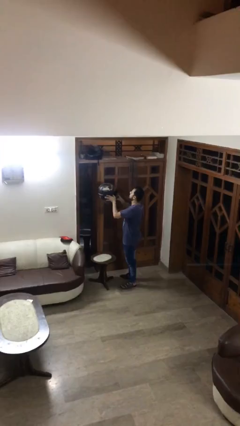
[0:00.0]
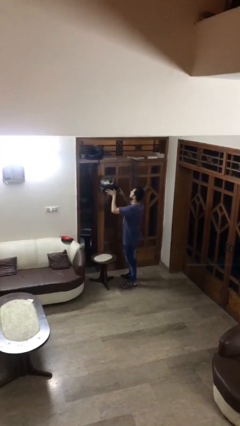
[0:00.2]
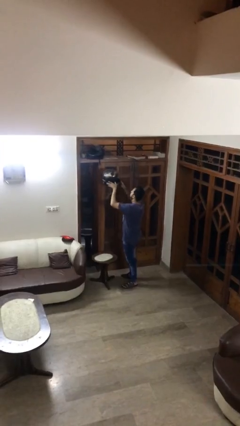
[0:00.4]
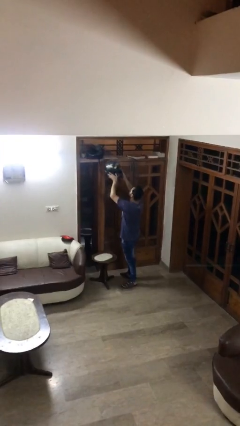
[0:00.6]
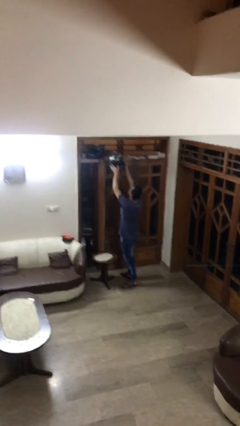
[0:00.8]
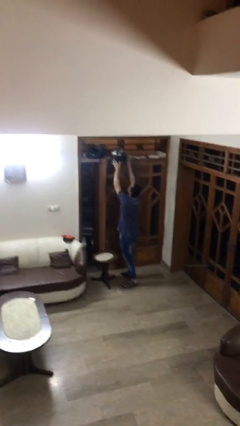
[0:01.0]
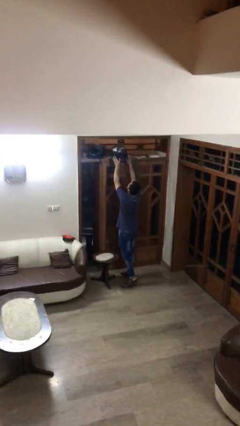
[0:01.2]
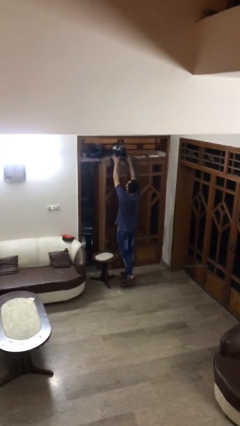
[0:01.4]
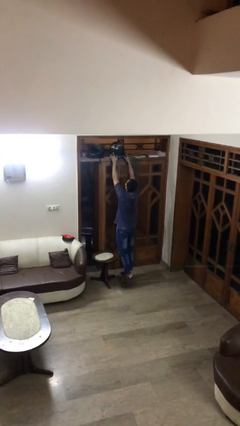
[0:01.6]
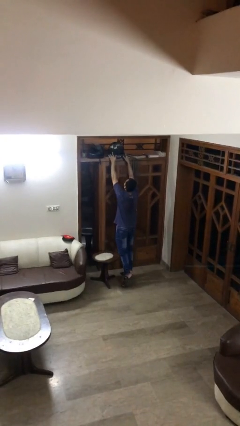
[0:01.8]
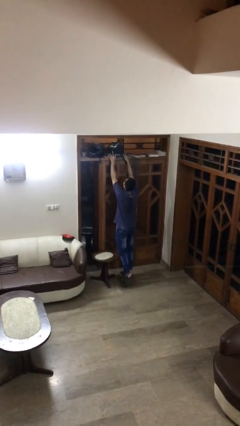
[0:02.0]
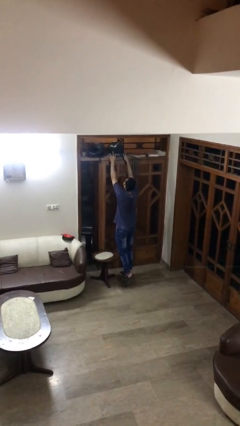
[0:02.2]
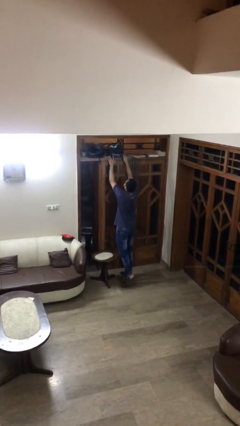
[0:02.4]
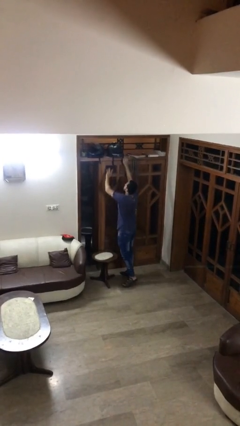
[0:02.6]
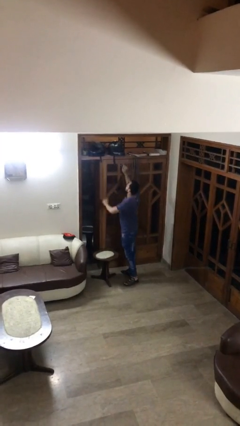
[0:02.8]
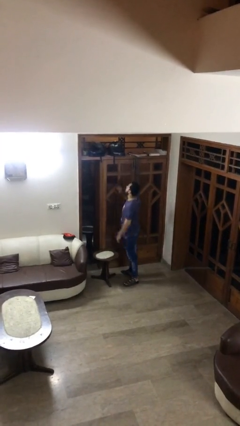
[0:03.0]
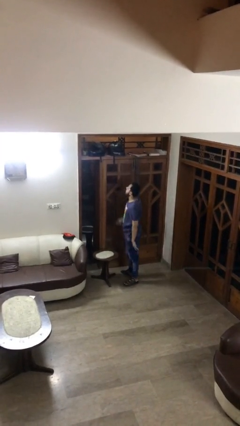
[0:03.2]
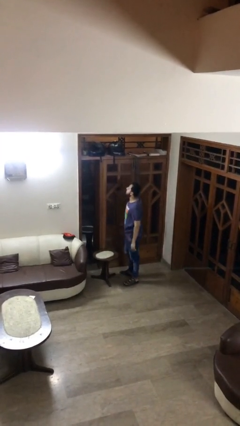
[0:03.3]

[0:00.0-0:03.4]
person puts down object on shelf

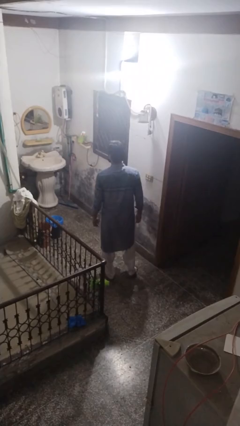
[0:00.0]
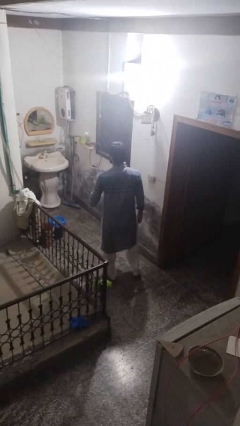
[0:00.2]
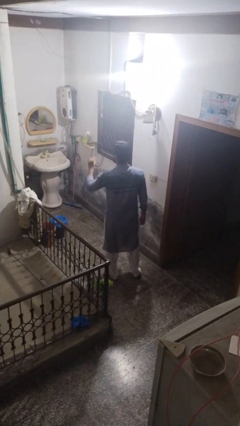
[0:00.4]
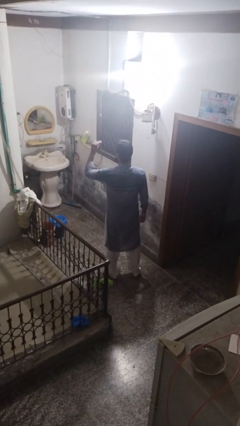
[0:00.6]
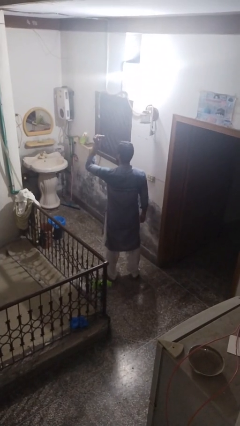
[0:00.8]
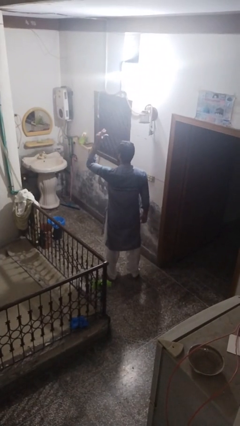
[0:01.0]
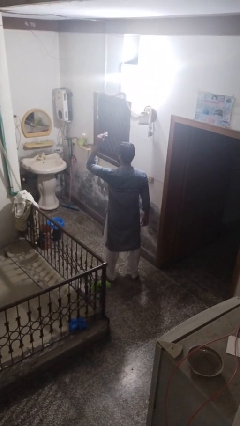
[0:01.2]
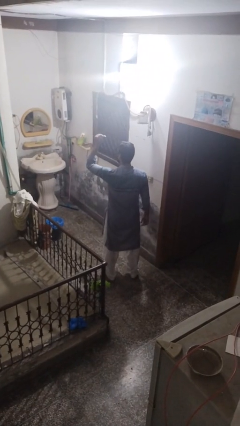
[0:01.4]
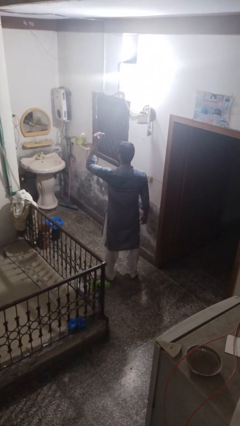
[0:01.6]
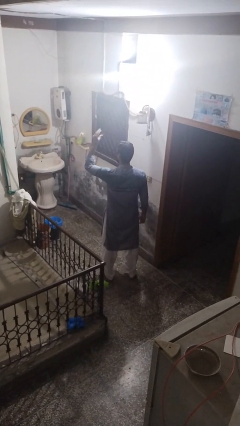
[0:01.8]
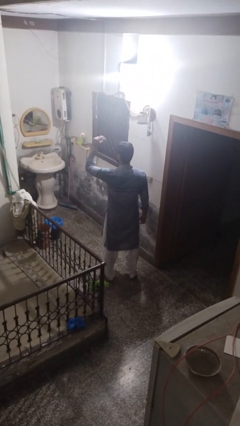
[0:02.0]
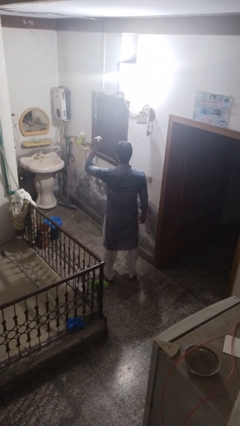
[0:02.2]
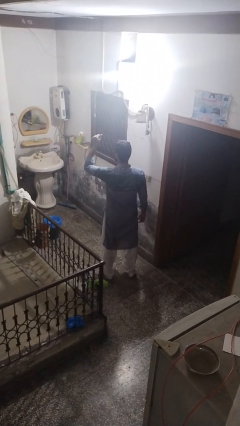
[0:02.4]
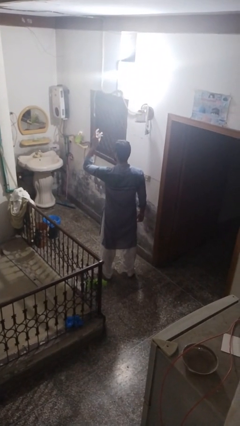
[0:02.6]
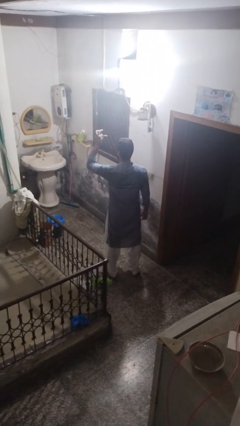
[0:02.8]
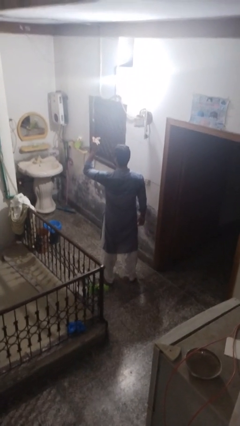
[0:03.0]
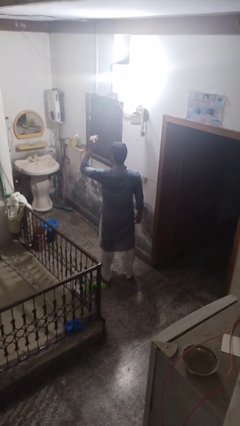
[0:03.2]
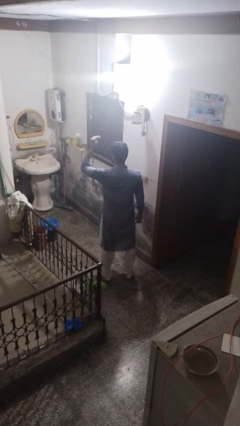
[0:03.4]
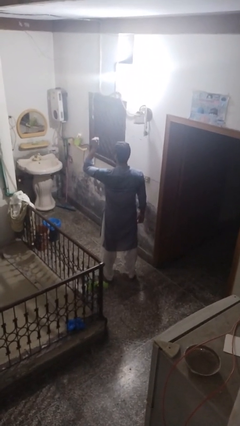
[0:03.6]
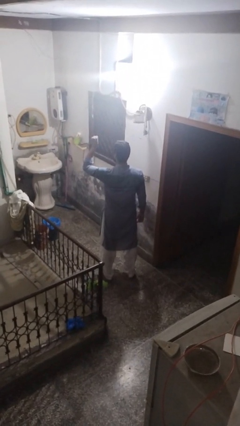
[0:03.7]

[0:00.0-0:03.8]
person snaps fingers

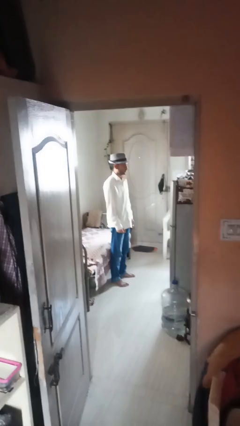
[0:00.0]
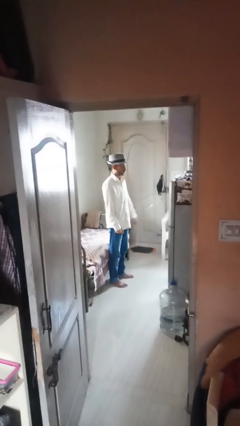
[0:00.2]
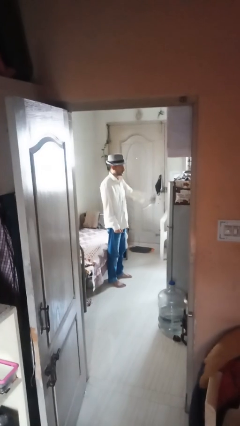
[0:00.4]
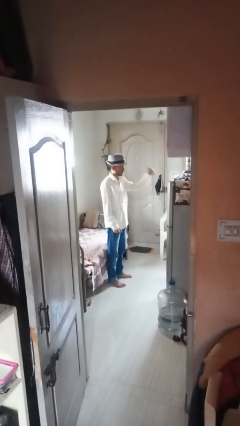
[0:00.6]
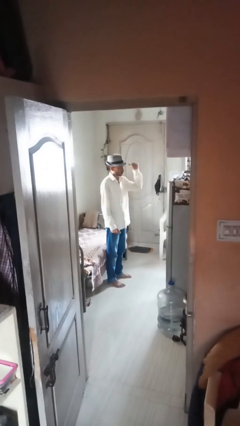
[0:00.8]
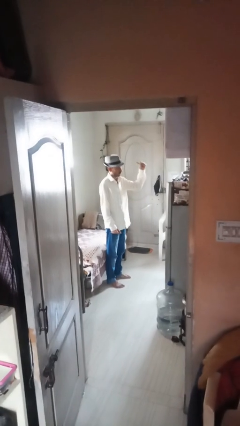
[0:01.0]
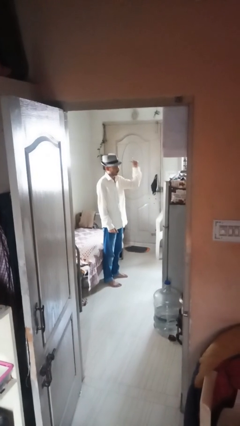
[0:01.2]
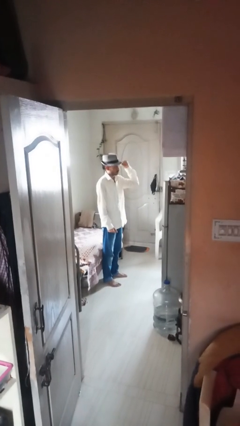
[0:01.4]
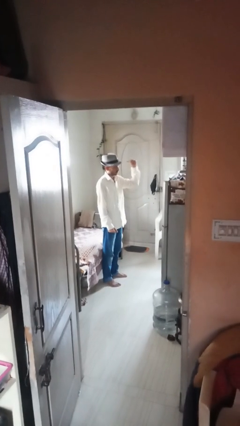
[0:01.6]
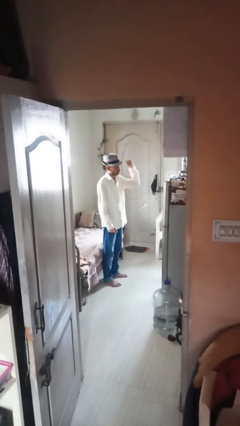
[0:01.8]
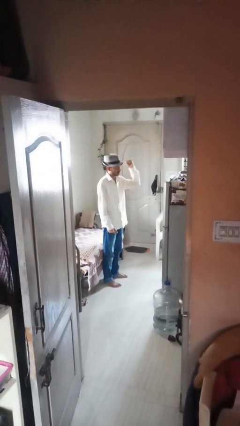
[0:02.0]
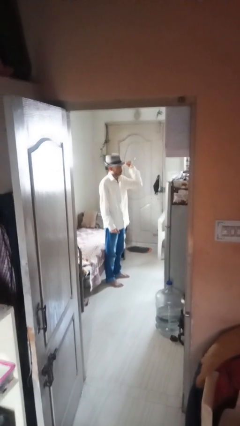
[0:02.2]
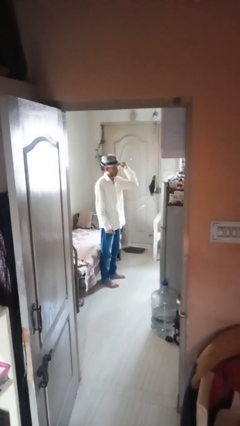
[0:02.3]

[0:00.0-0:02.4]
person gestures behind me

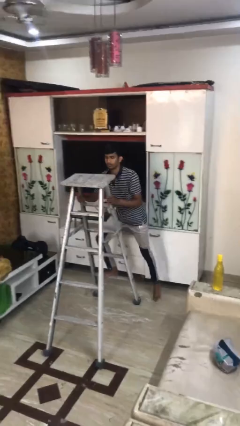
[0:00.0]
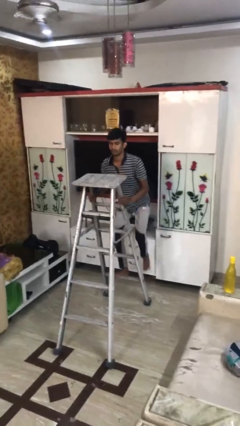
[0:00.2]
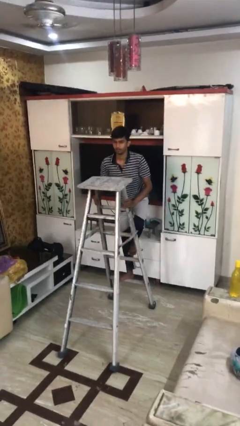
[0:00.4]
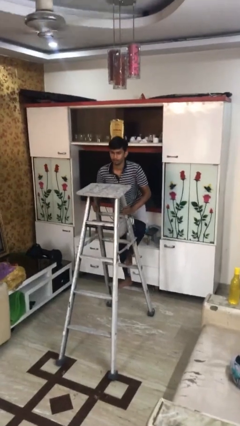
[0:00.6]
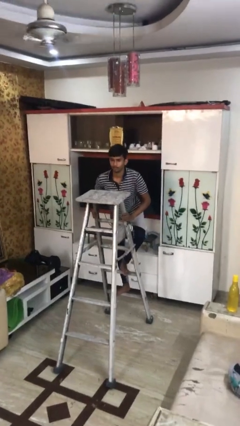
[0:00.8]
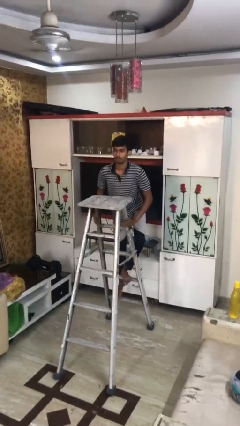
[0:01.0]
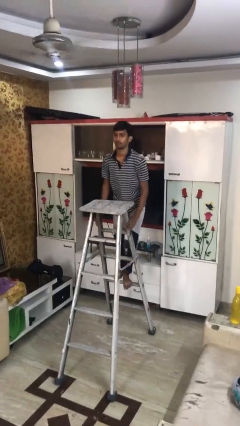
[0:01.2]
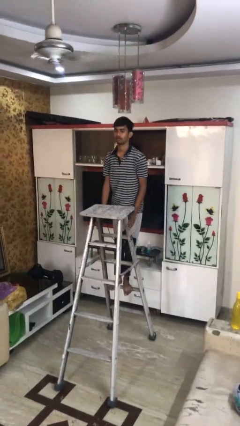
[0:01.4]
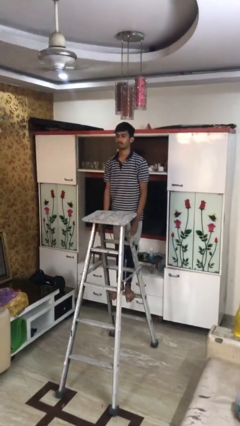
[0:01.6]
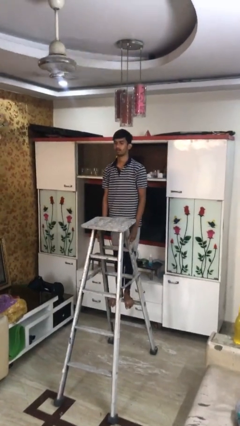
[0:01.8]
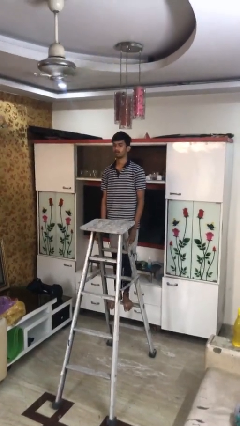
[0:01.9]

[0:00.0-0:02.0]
person climbs up ladder

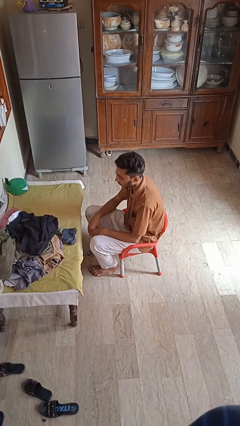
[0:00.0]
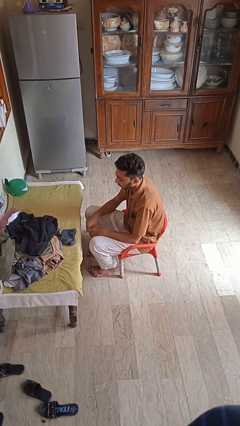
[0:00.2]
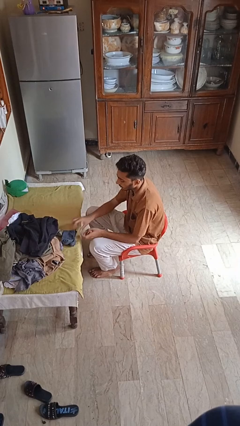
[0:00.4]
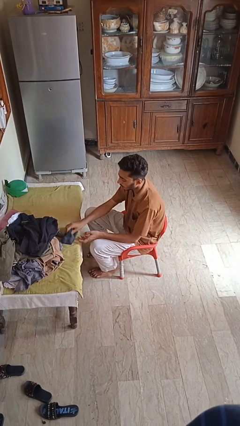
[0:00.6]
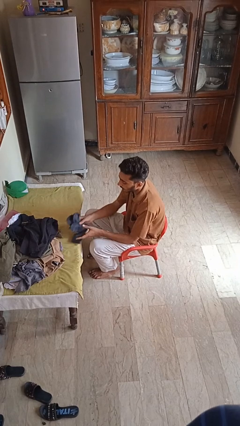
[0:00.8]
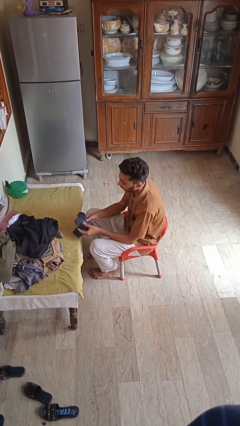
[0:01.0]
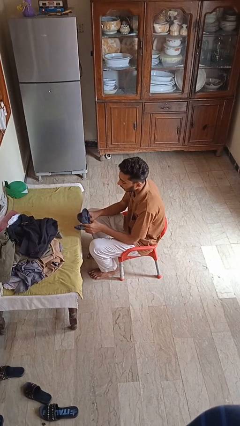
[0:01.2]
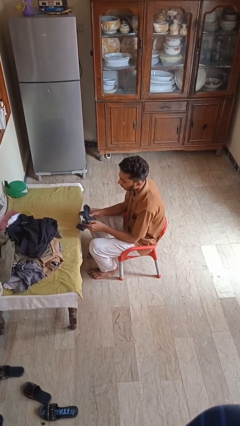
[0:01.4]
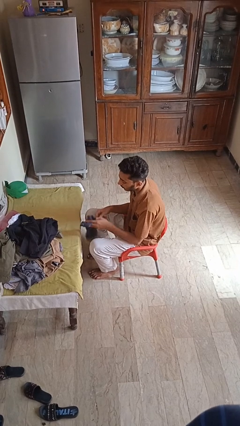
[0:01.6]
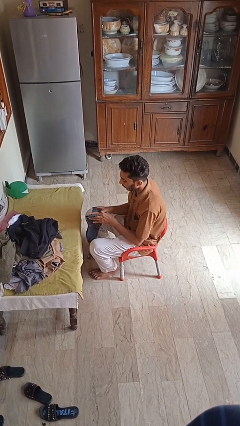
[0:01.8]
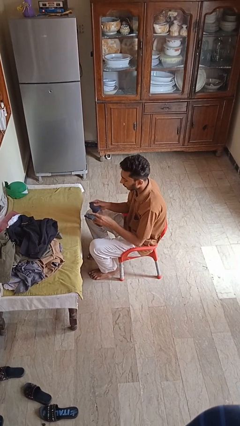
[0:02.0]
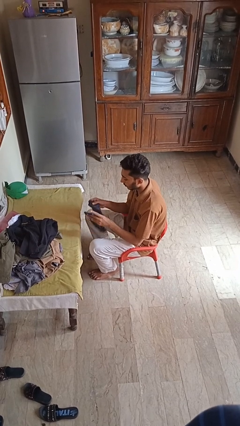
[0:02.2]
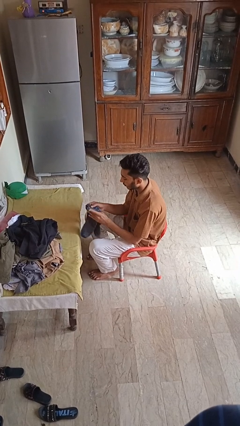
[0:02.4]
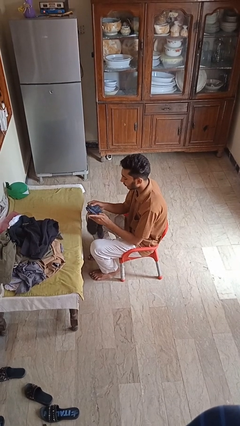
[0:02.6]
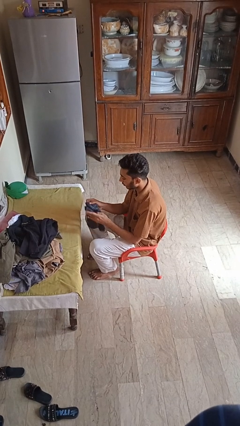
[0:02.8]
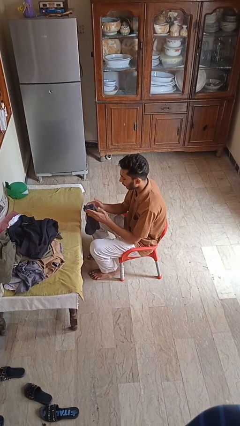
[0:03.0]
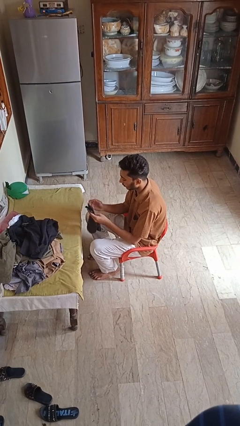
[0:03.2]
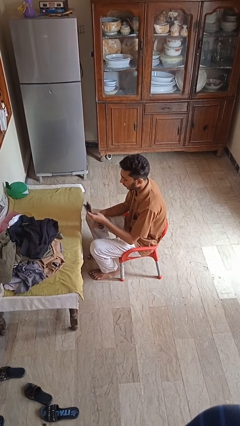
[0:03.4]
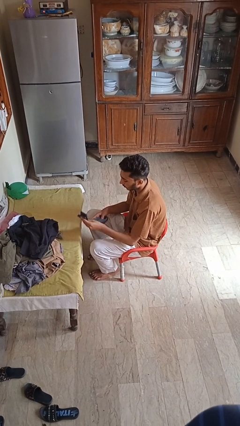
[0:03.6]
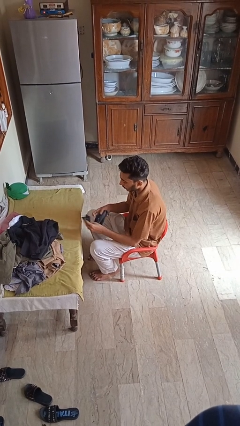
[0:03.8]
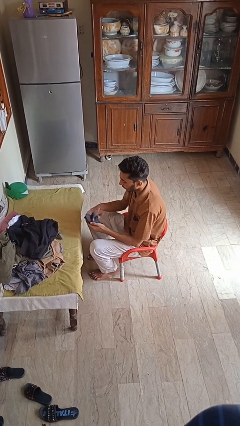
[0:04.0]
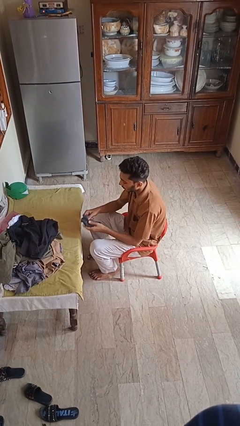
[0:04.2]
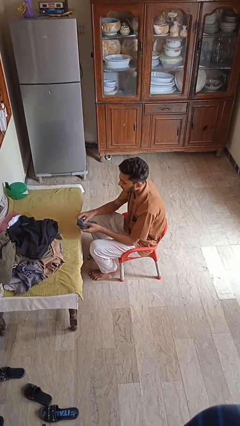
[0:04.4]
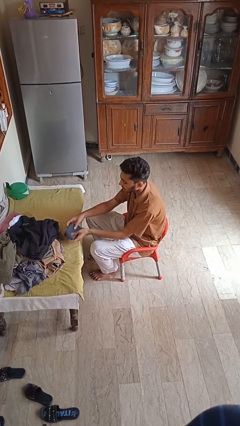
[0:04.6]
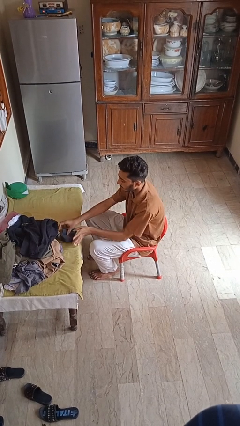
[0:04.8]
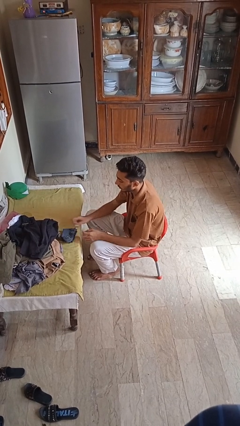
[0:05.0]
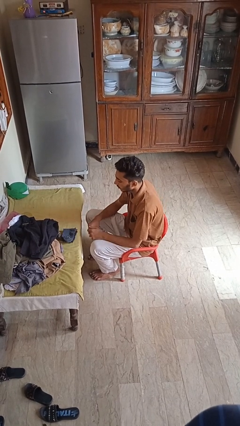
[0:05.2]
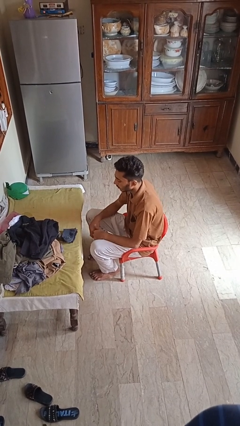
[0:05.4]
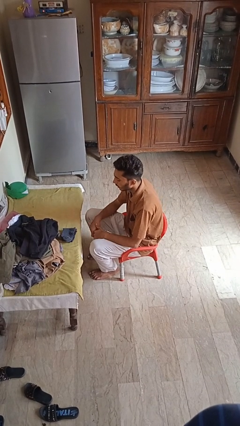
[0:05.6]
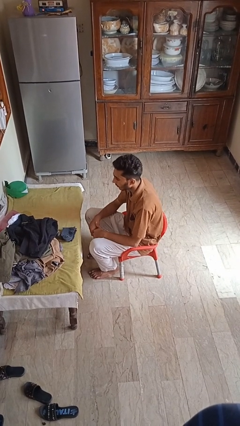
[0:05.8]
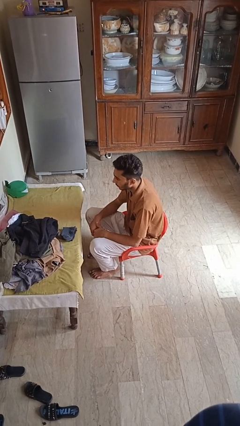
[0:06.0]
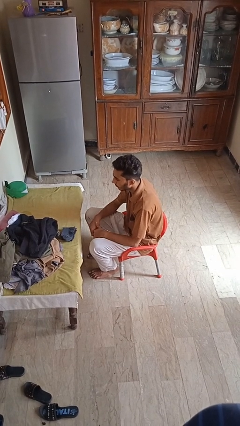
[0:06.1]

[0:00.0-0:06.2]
person folds socks
